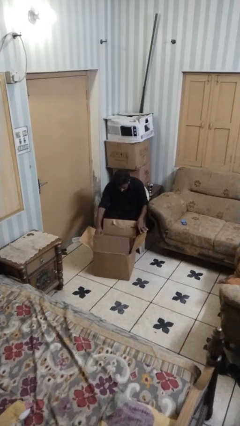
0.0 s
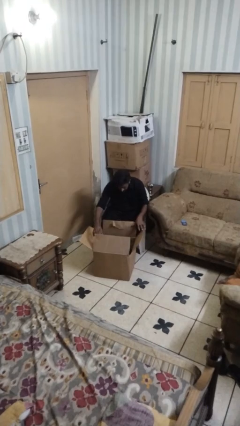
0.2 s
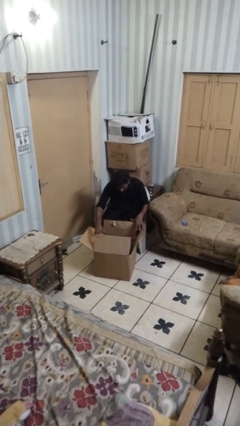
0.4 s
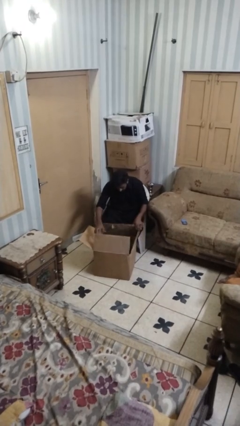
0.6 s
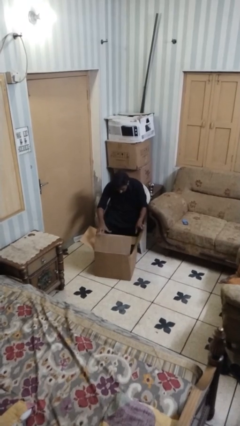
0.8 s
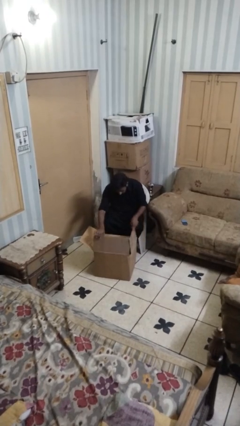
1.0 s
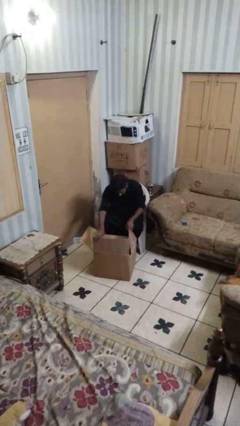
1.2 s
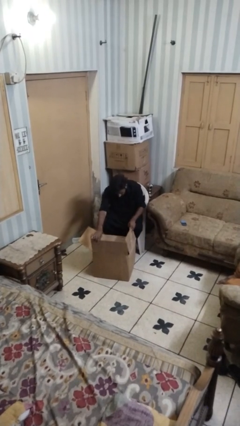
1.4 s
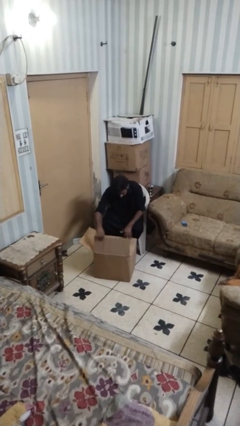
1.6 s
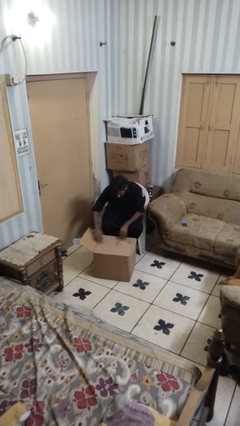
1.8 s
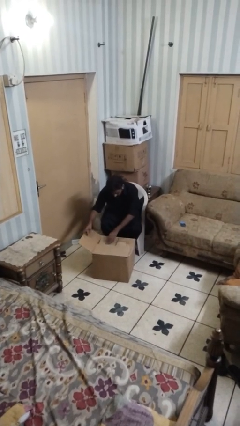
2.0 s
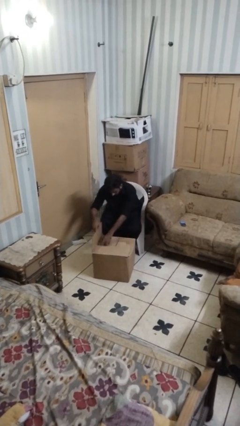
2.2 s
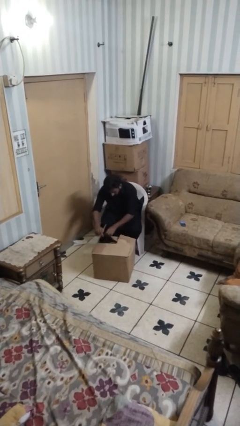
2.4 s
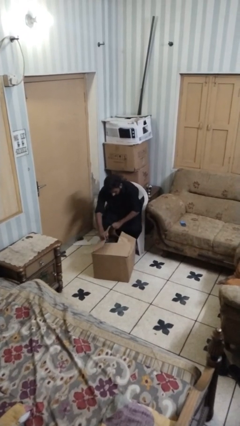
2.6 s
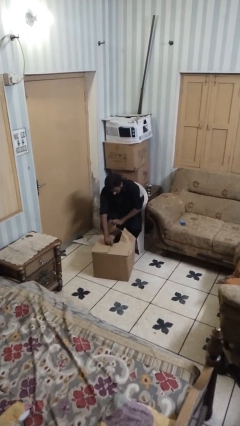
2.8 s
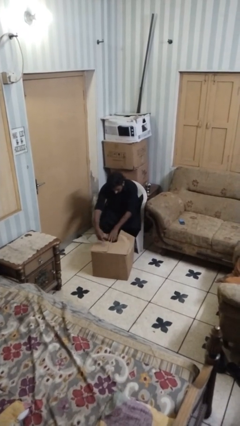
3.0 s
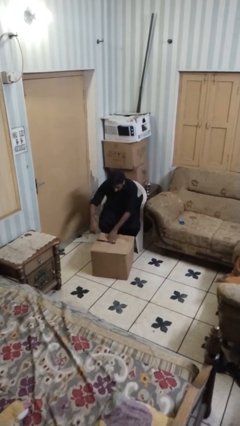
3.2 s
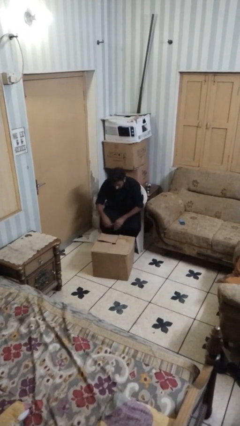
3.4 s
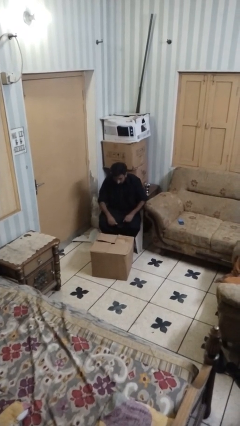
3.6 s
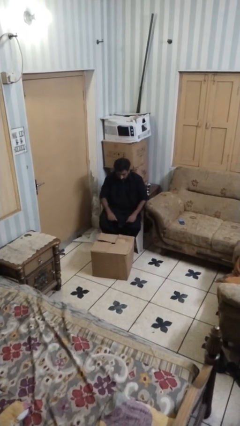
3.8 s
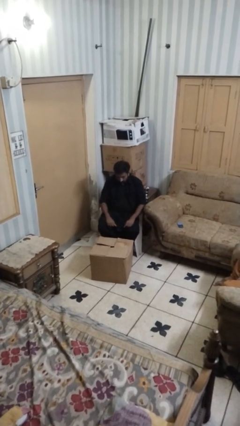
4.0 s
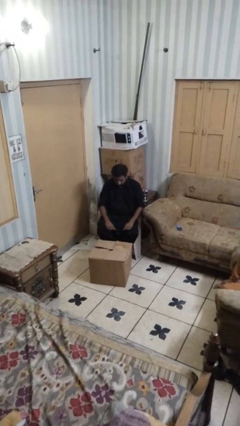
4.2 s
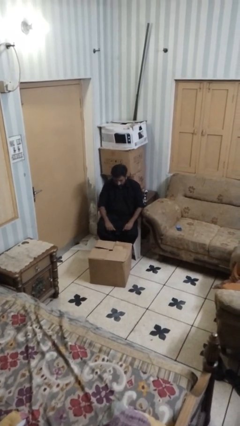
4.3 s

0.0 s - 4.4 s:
person closes box

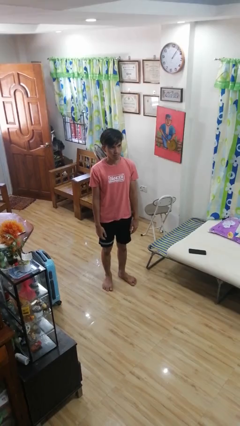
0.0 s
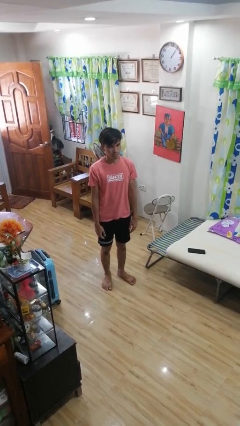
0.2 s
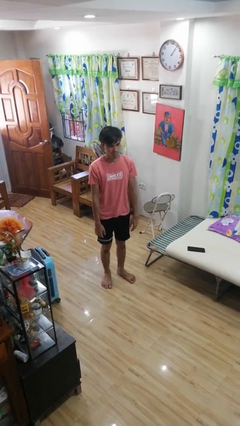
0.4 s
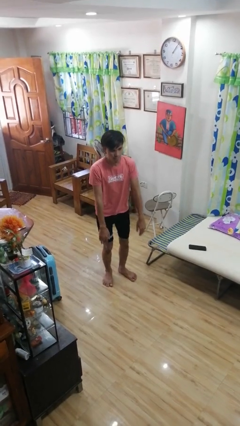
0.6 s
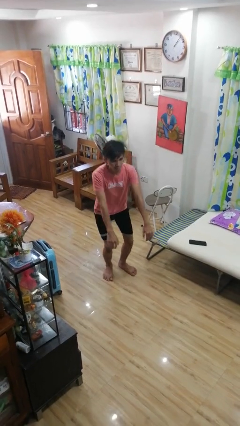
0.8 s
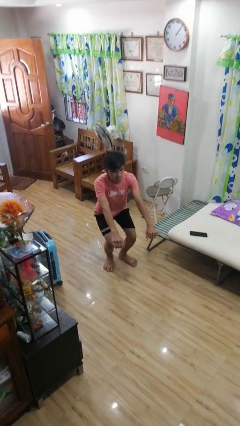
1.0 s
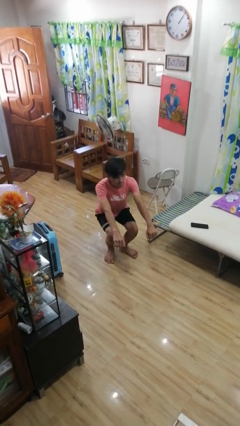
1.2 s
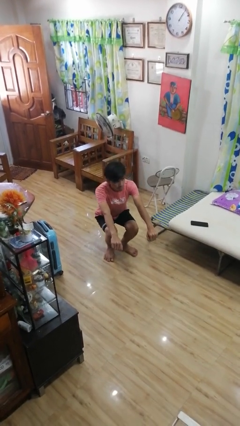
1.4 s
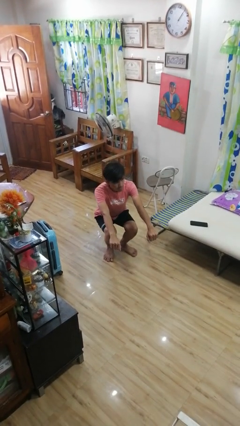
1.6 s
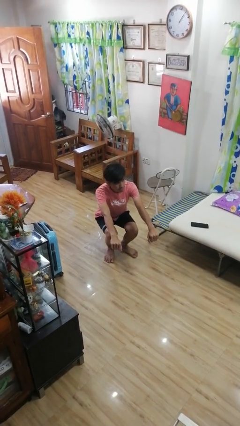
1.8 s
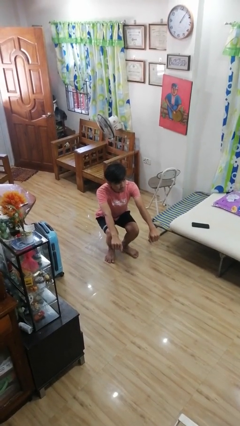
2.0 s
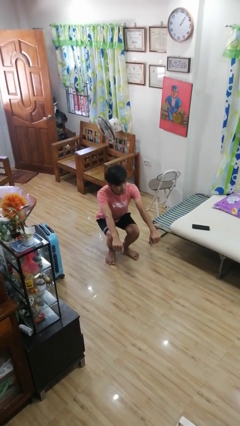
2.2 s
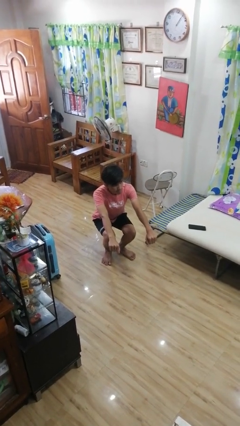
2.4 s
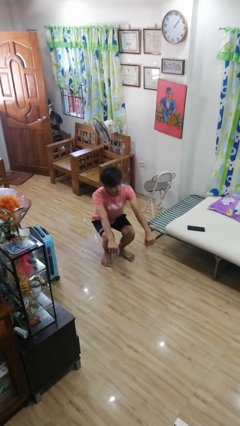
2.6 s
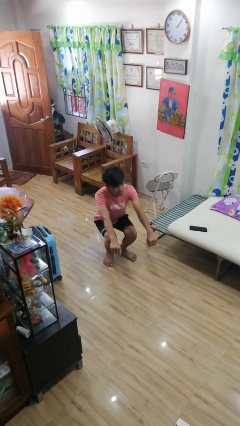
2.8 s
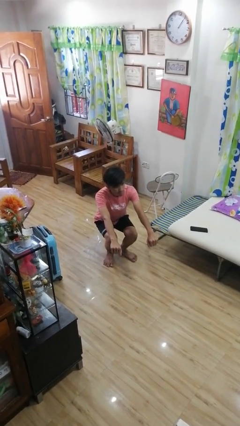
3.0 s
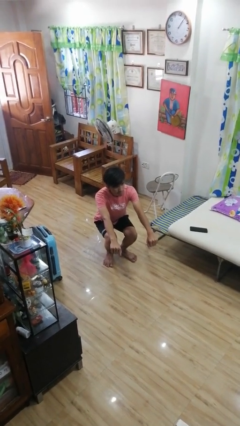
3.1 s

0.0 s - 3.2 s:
person squats

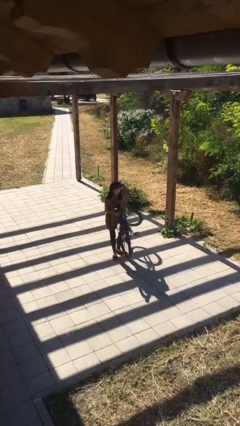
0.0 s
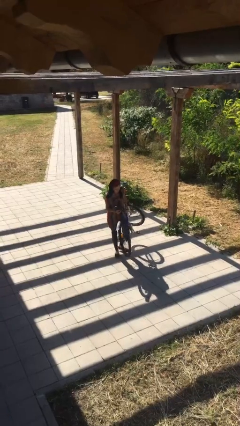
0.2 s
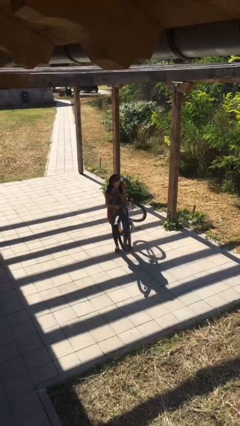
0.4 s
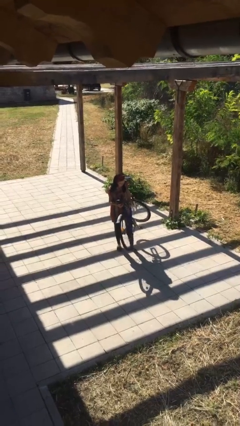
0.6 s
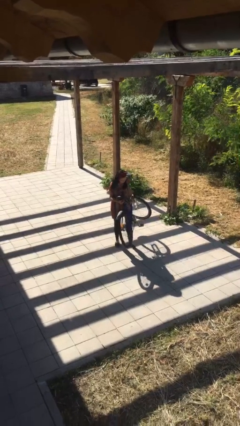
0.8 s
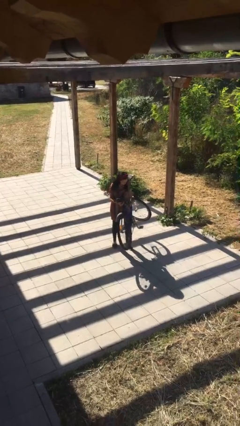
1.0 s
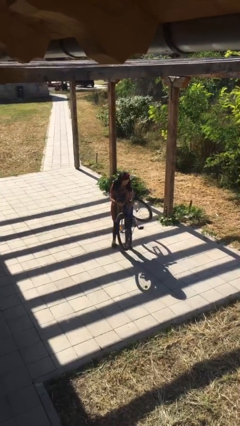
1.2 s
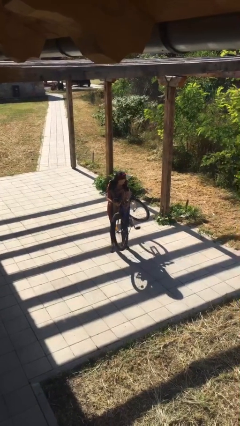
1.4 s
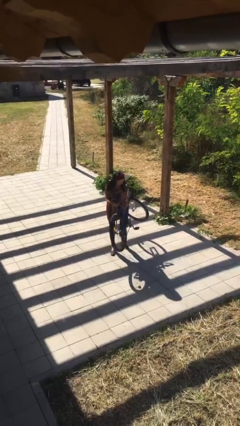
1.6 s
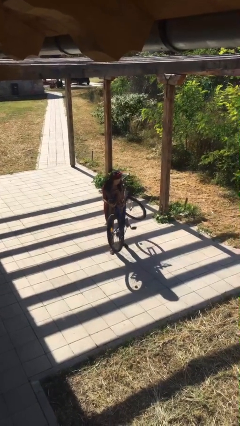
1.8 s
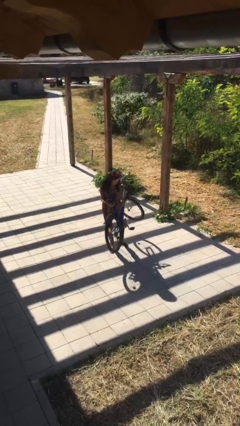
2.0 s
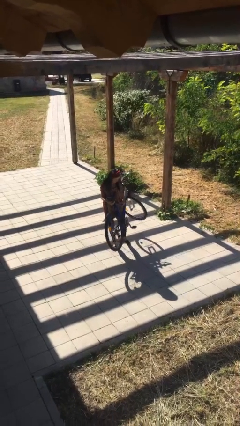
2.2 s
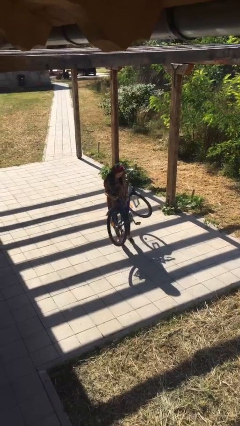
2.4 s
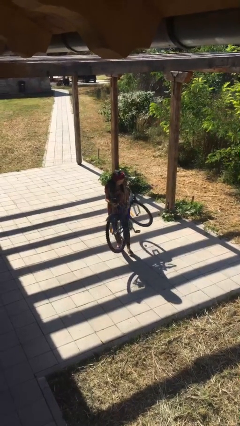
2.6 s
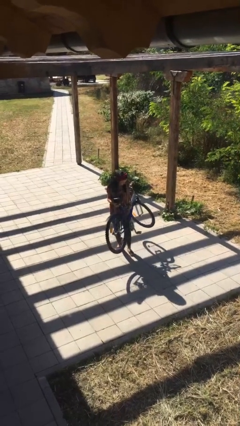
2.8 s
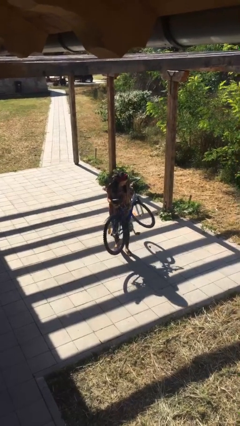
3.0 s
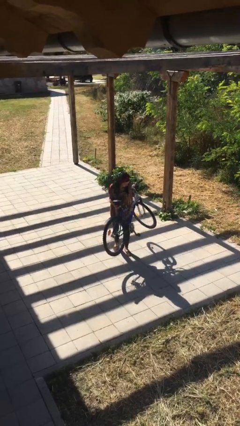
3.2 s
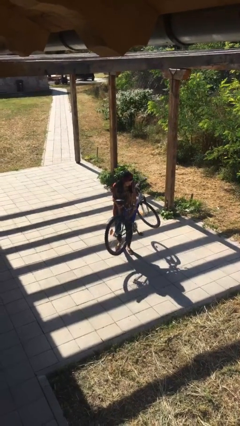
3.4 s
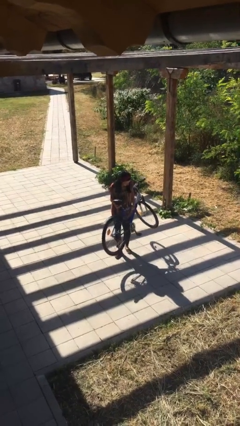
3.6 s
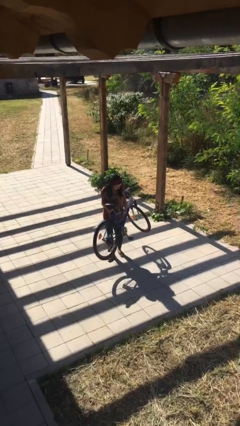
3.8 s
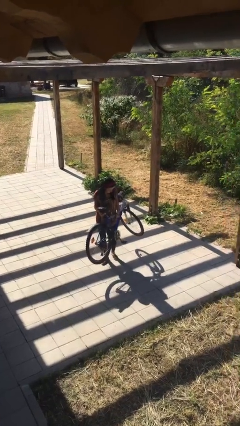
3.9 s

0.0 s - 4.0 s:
person carries heavy object

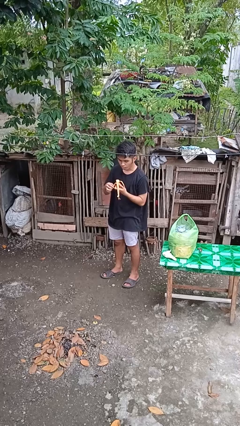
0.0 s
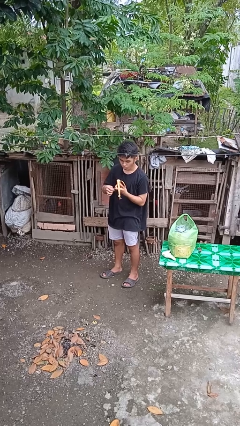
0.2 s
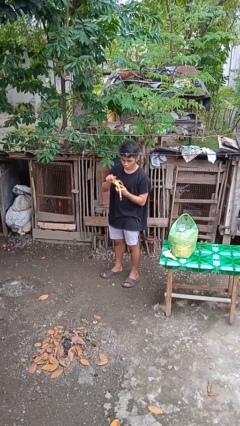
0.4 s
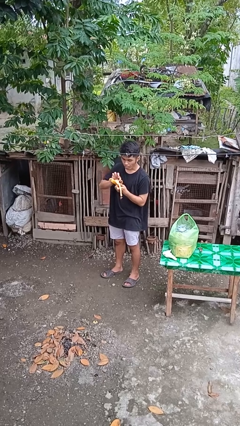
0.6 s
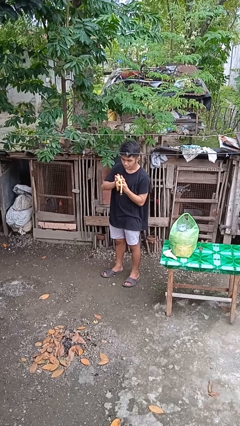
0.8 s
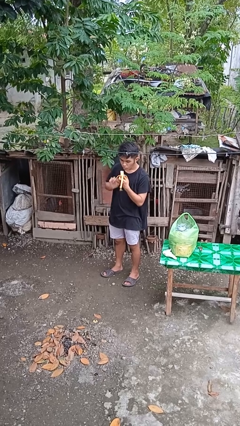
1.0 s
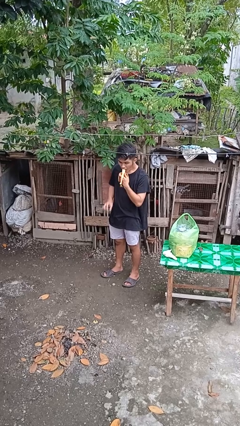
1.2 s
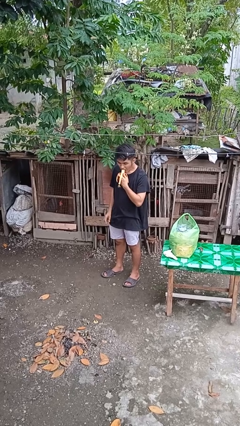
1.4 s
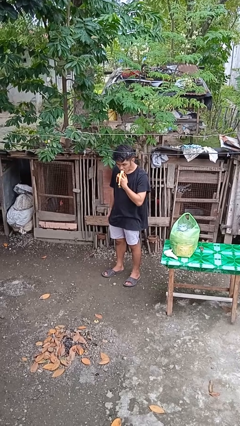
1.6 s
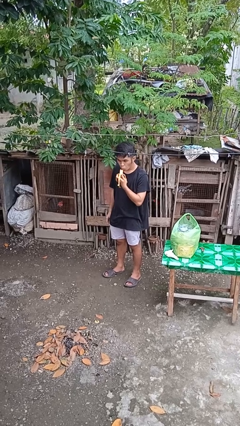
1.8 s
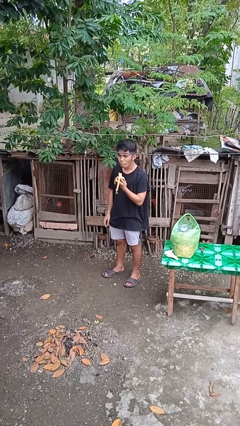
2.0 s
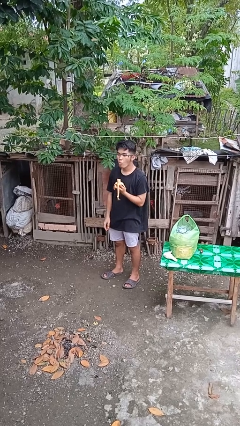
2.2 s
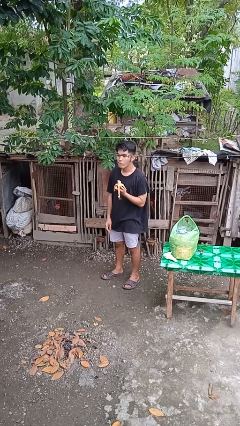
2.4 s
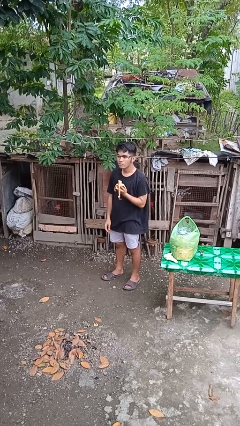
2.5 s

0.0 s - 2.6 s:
person eats banana

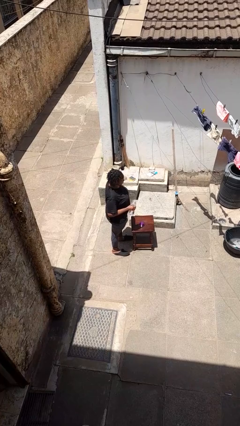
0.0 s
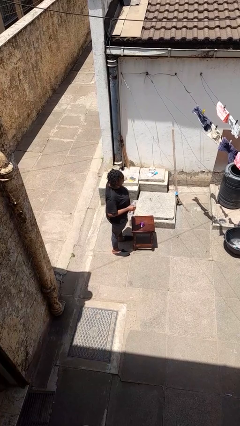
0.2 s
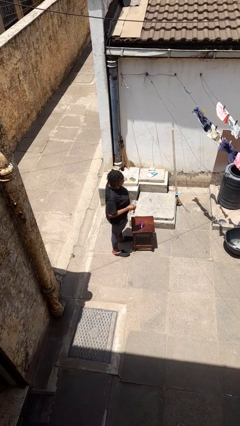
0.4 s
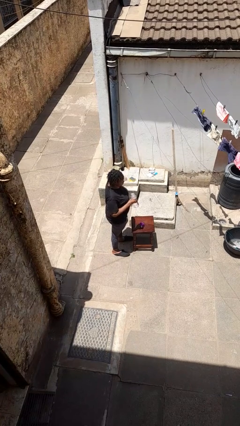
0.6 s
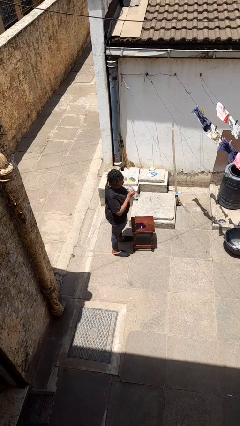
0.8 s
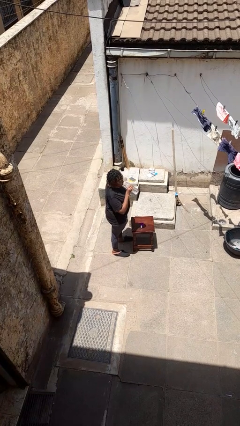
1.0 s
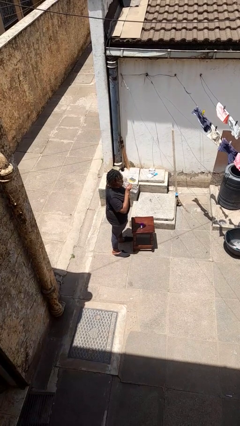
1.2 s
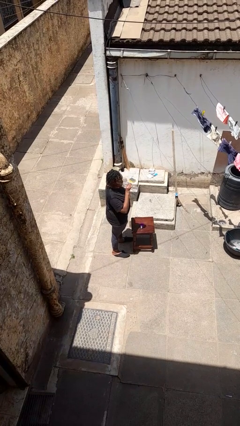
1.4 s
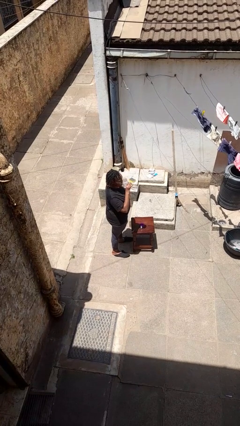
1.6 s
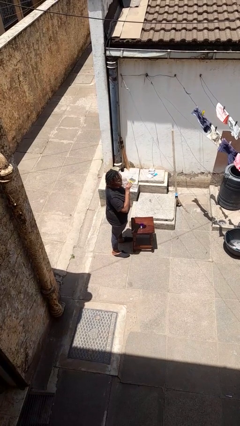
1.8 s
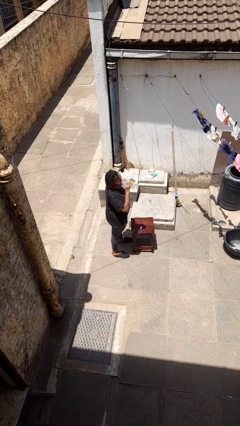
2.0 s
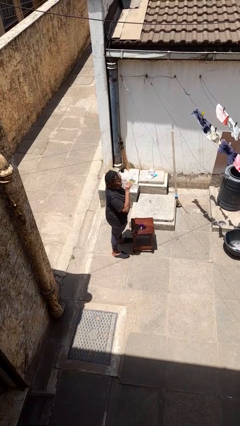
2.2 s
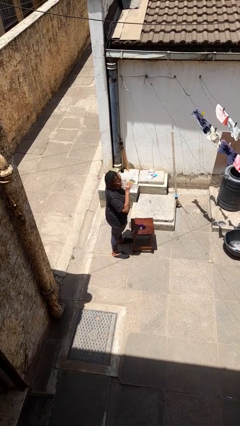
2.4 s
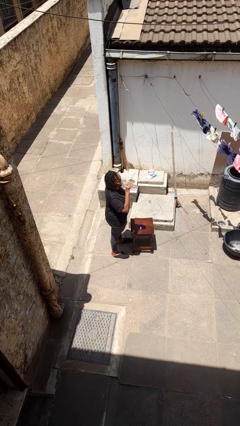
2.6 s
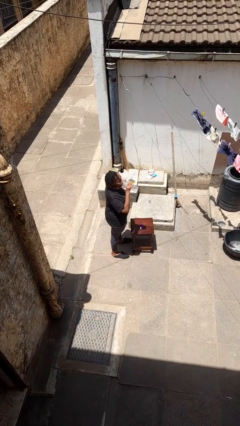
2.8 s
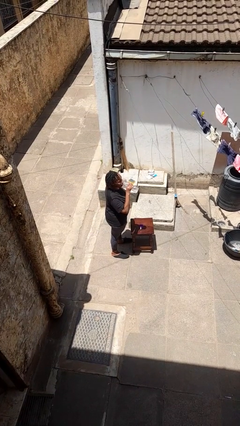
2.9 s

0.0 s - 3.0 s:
person drinks from bottle
